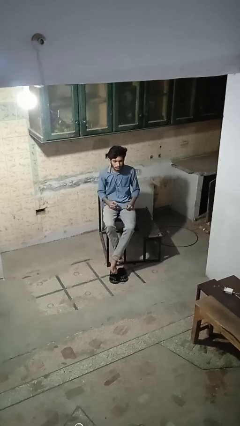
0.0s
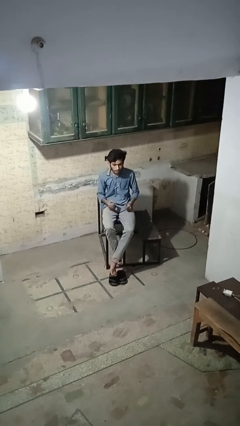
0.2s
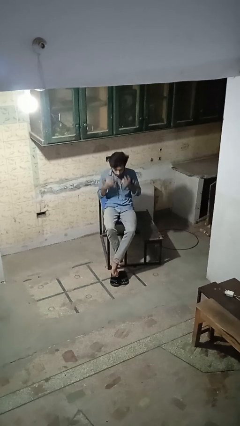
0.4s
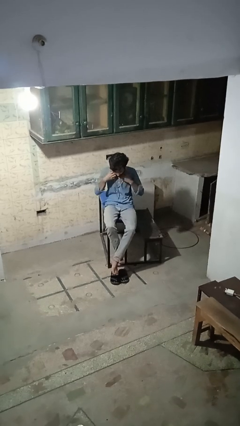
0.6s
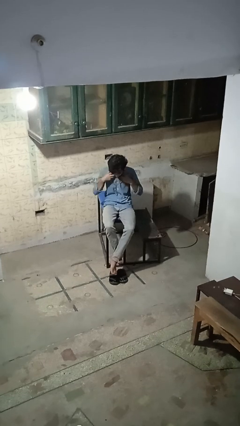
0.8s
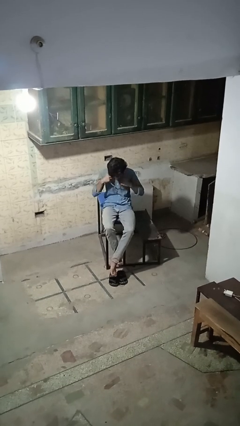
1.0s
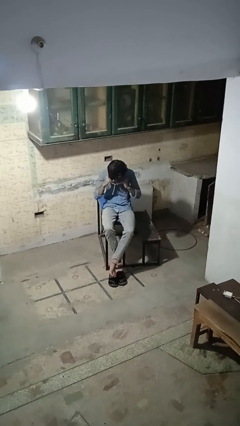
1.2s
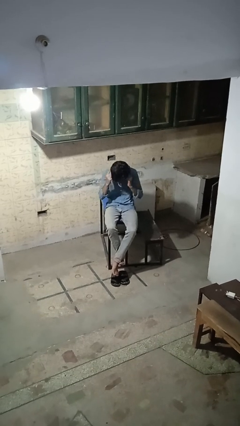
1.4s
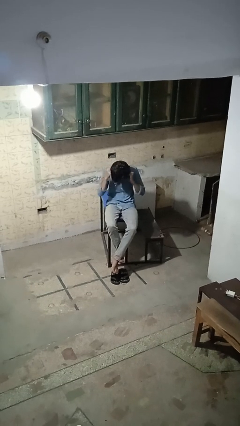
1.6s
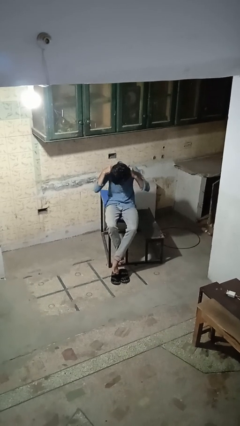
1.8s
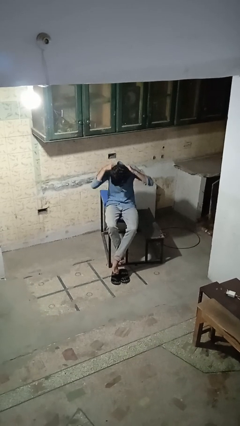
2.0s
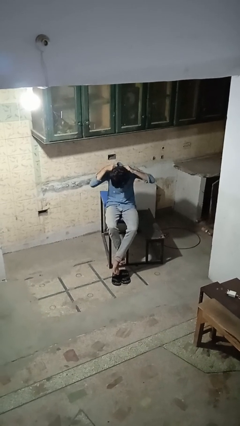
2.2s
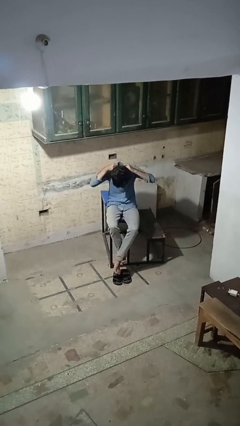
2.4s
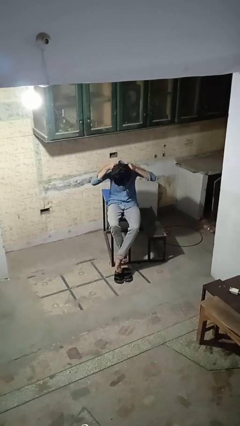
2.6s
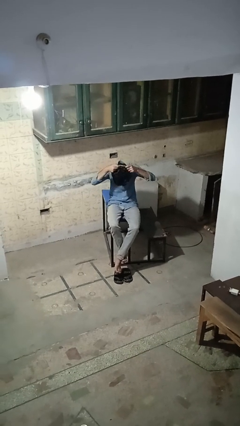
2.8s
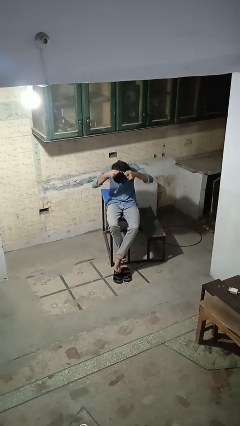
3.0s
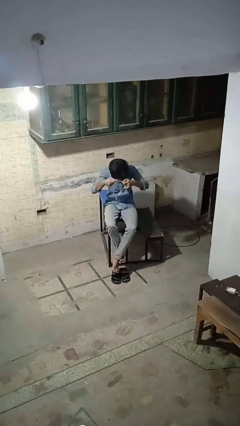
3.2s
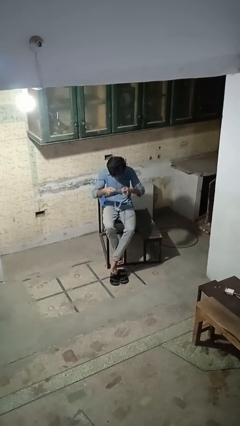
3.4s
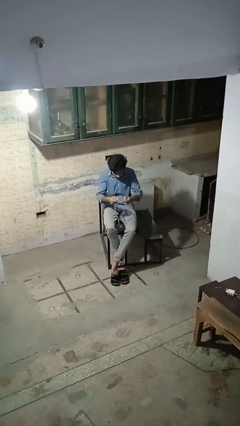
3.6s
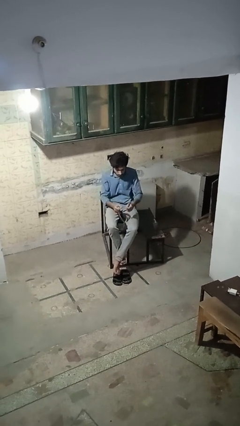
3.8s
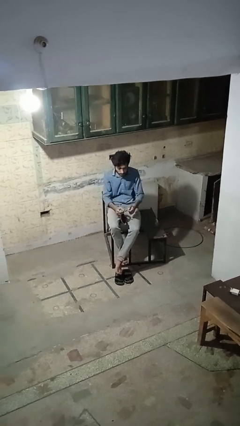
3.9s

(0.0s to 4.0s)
person takes off necklace

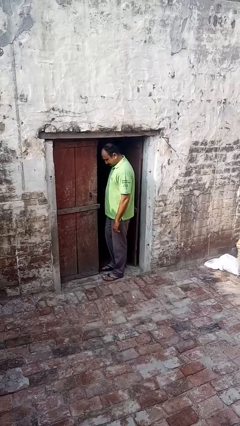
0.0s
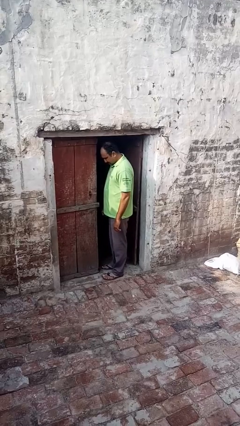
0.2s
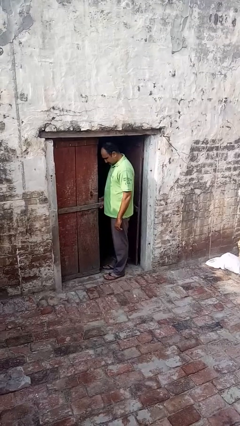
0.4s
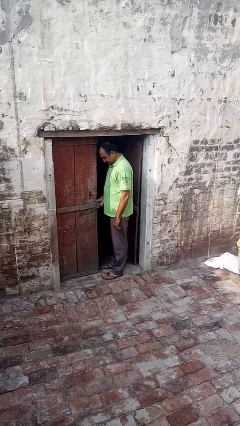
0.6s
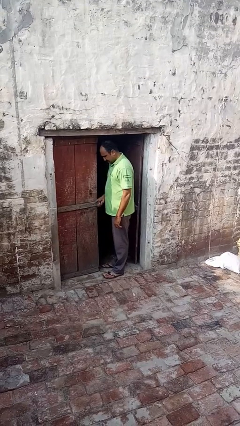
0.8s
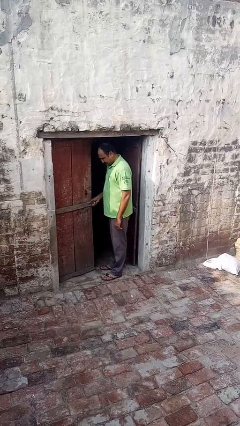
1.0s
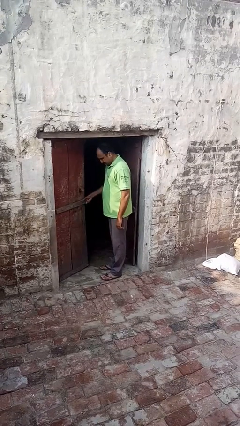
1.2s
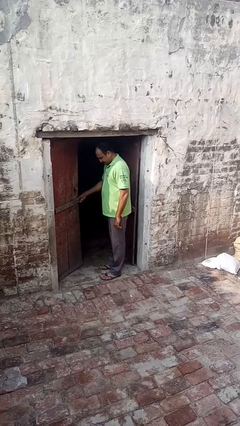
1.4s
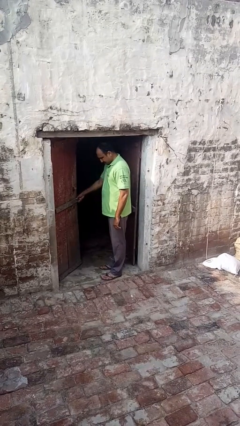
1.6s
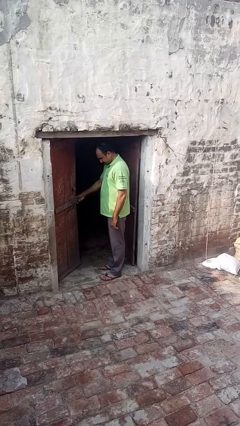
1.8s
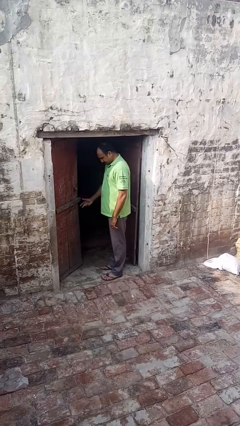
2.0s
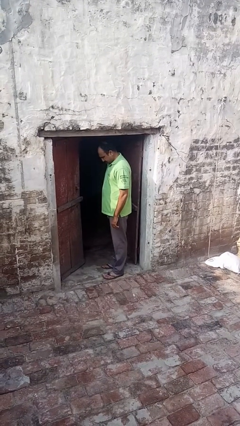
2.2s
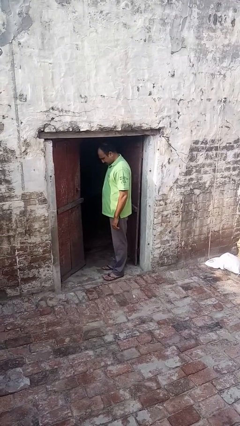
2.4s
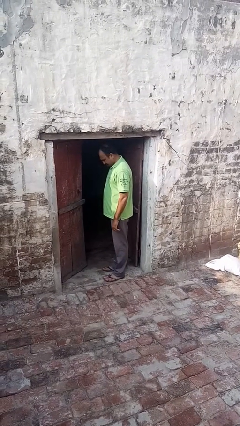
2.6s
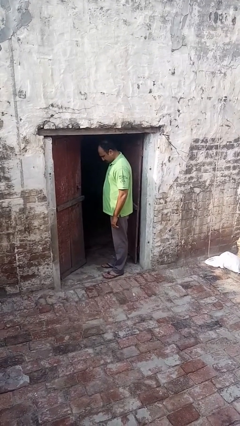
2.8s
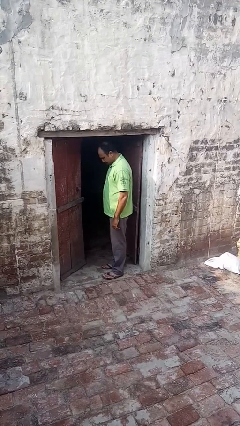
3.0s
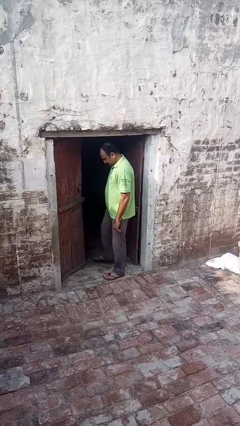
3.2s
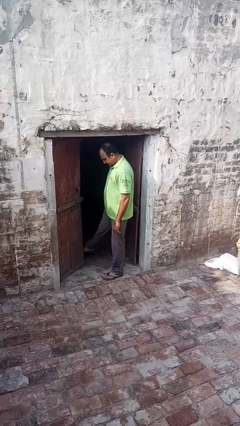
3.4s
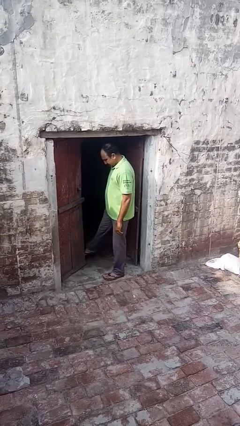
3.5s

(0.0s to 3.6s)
person opens facility door

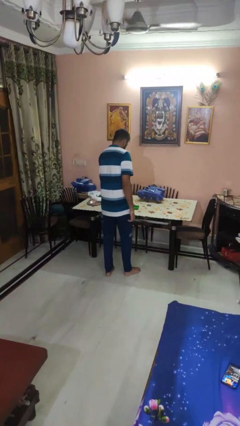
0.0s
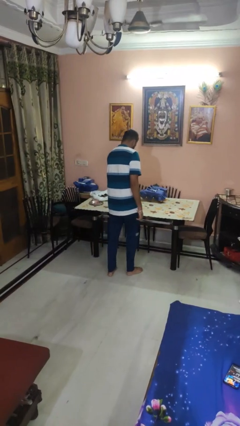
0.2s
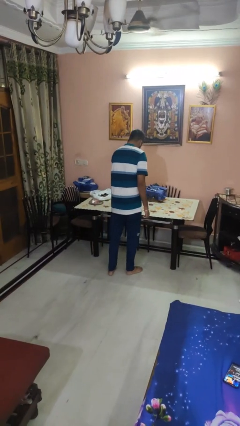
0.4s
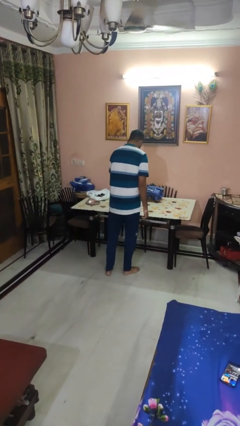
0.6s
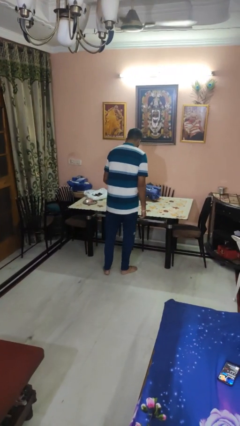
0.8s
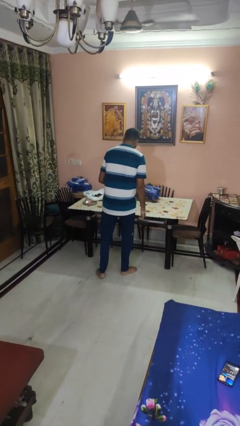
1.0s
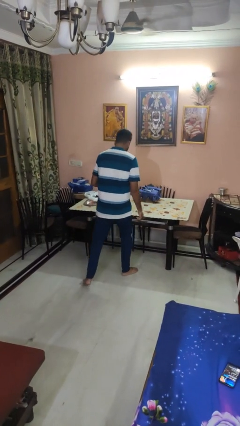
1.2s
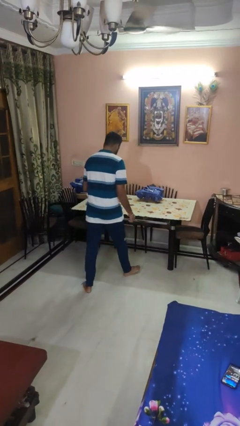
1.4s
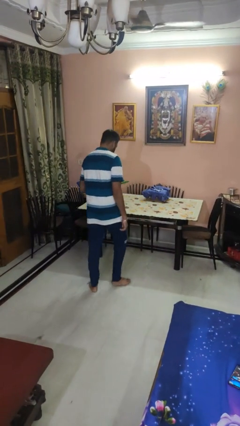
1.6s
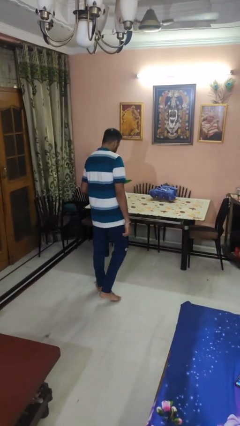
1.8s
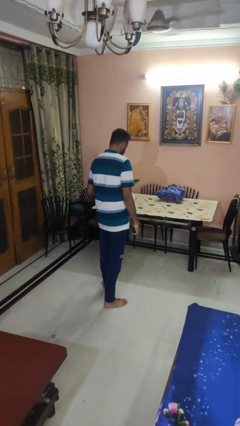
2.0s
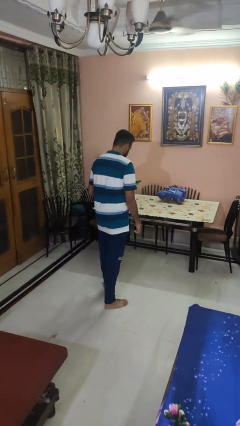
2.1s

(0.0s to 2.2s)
person picks up object from table

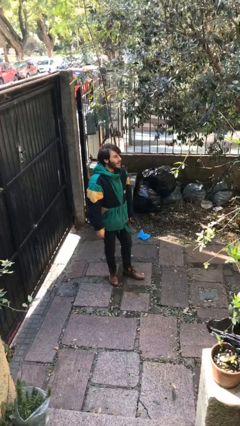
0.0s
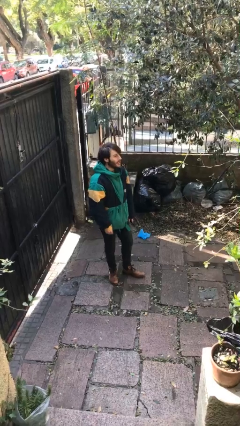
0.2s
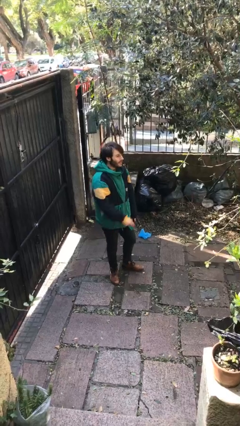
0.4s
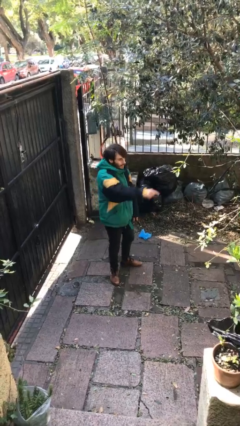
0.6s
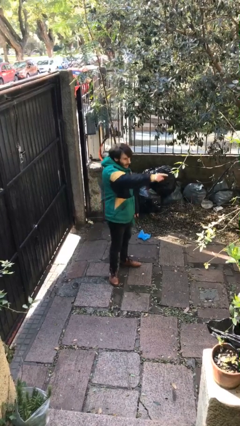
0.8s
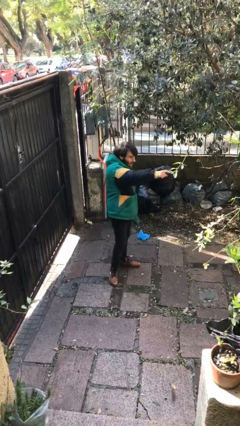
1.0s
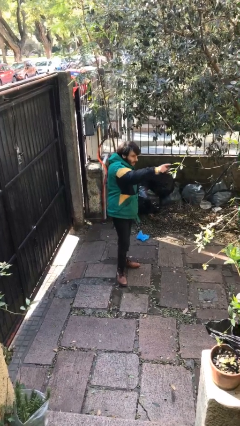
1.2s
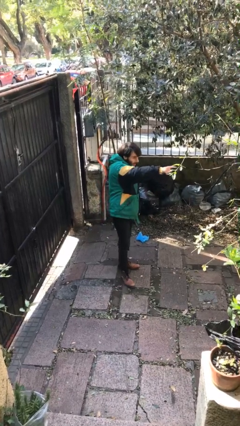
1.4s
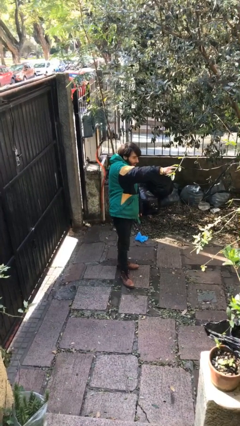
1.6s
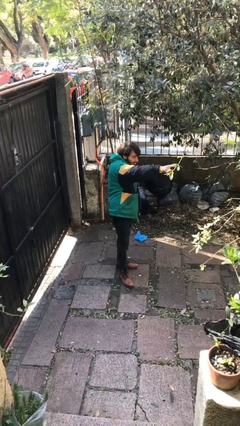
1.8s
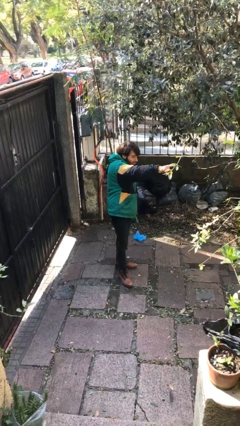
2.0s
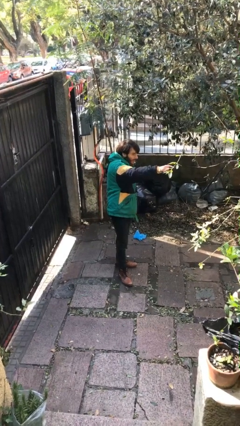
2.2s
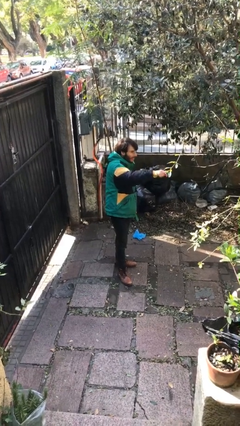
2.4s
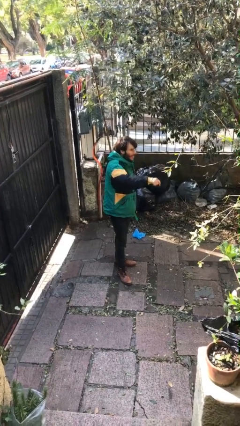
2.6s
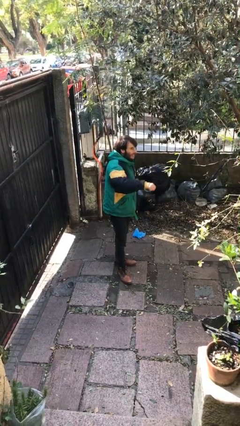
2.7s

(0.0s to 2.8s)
person points at person

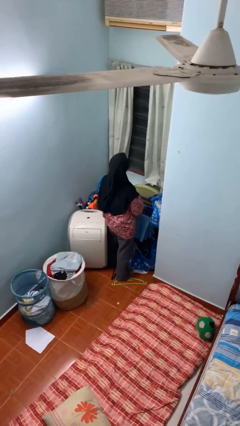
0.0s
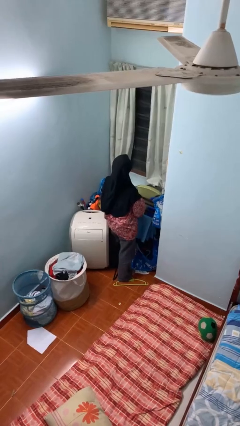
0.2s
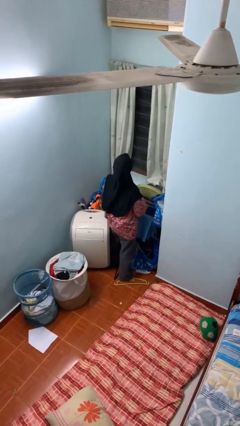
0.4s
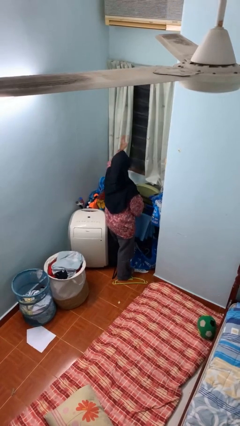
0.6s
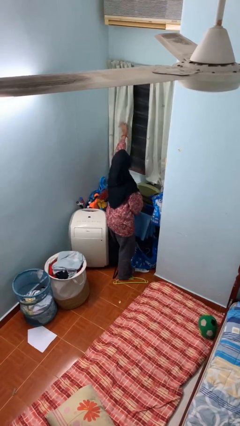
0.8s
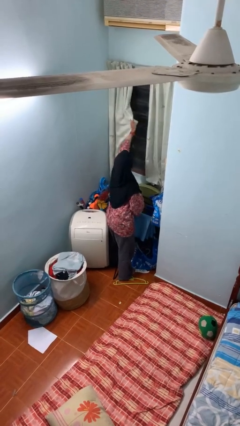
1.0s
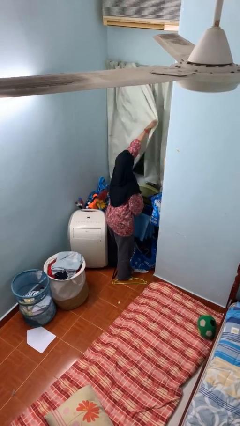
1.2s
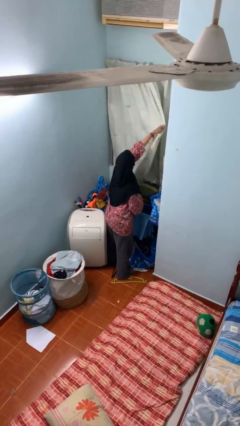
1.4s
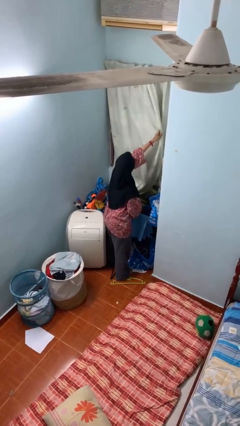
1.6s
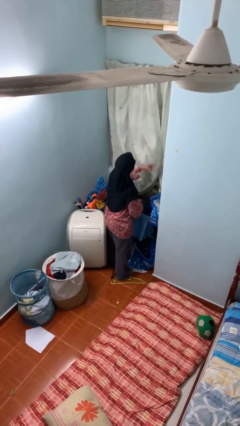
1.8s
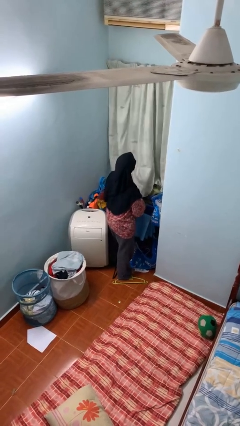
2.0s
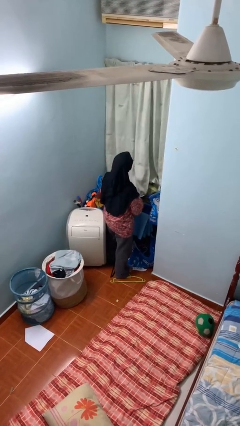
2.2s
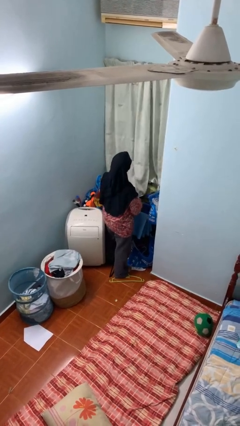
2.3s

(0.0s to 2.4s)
person closes curtains

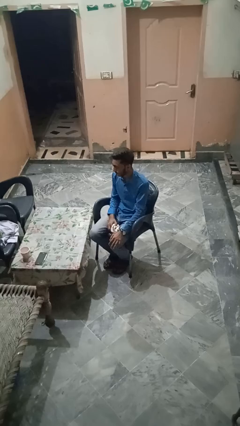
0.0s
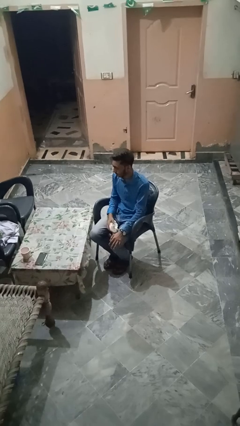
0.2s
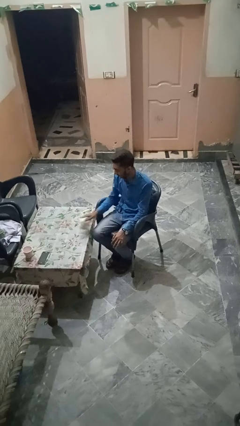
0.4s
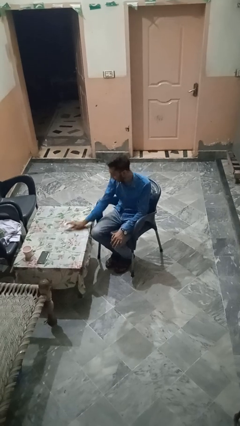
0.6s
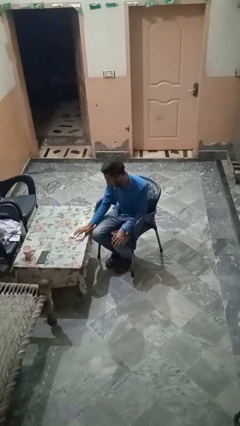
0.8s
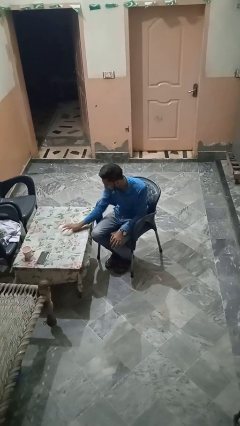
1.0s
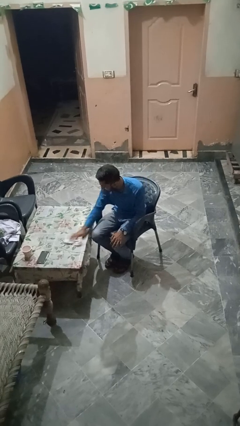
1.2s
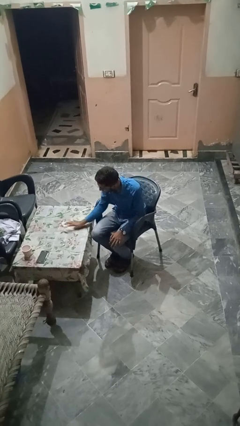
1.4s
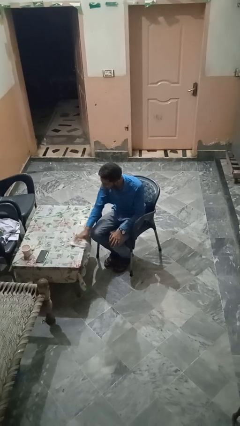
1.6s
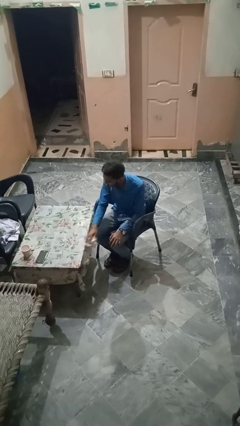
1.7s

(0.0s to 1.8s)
person cleans table with rag

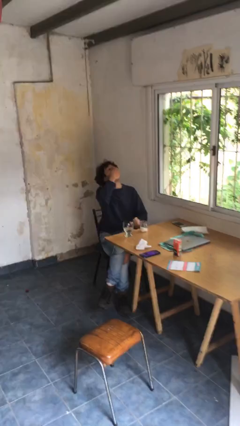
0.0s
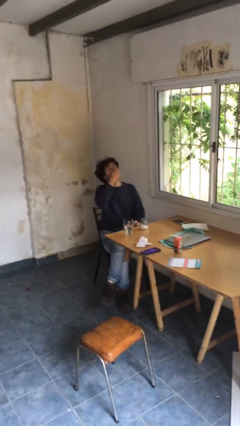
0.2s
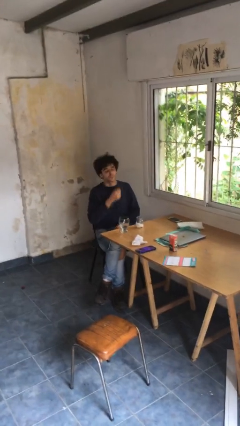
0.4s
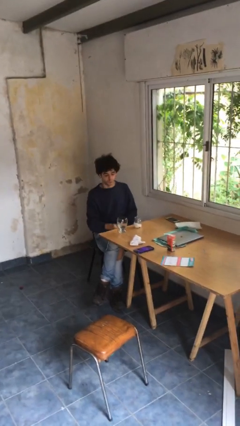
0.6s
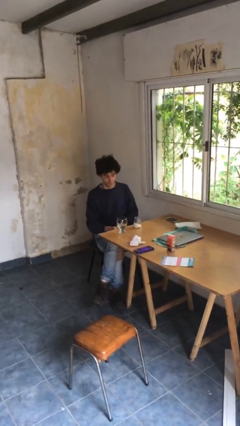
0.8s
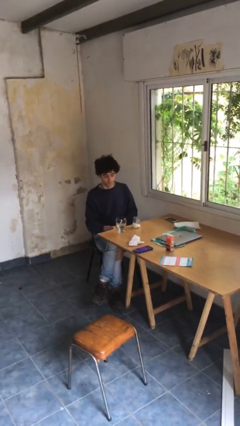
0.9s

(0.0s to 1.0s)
person takes medicine pills
